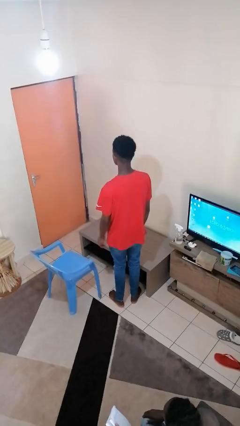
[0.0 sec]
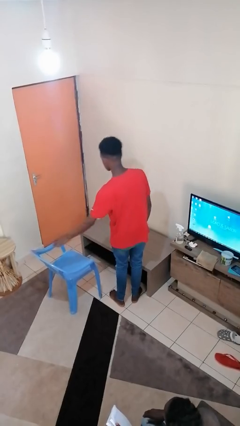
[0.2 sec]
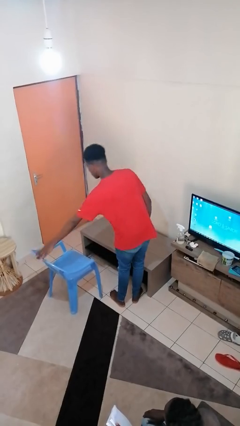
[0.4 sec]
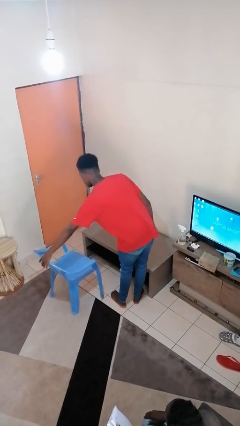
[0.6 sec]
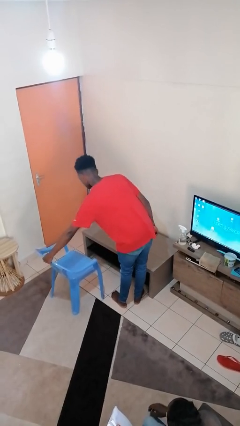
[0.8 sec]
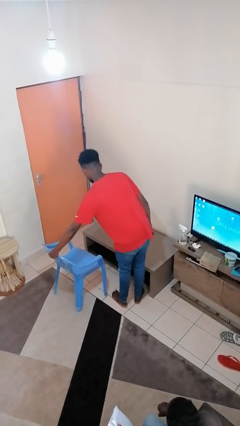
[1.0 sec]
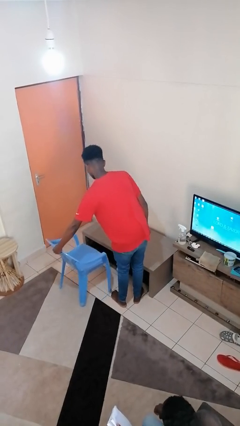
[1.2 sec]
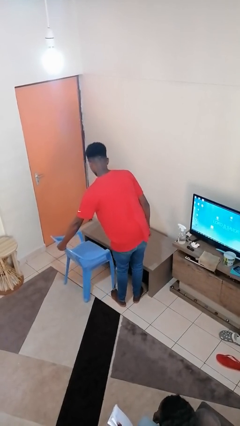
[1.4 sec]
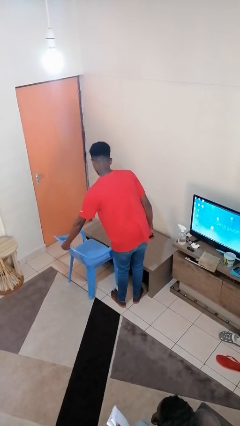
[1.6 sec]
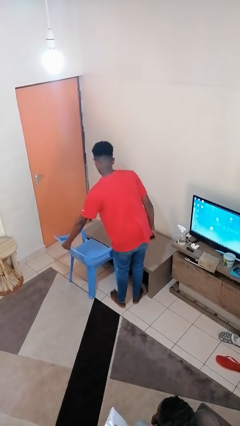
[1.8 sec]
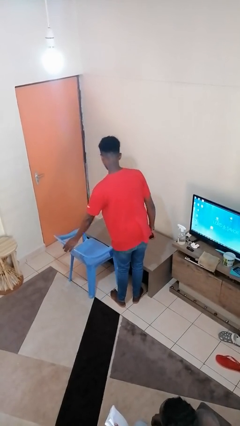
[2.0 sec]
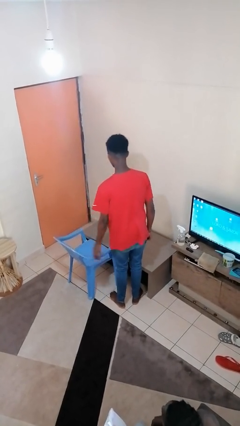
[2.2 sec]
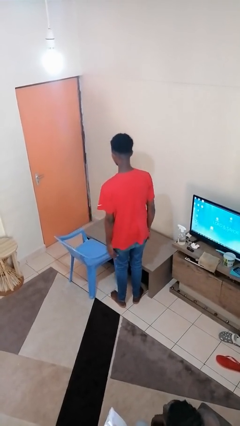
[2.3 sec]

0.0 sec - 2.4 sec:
person pushes in chair

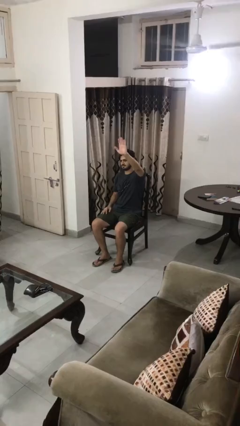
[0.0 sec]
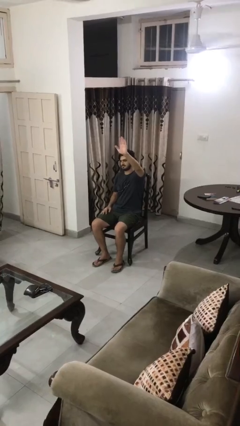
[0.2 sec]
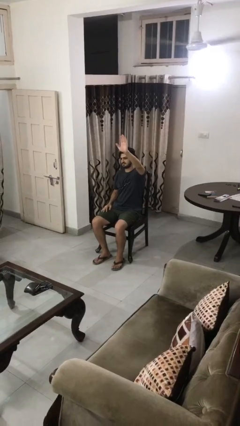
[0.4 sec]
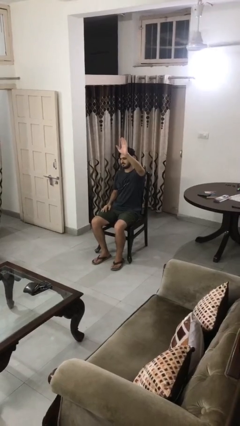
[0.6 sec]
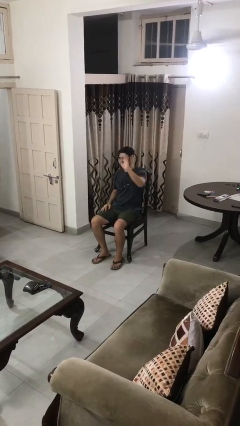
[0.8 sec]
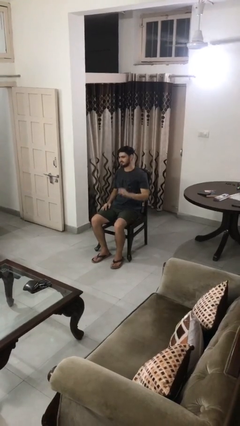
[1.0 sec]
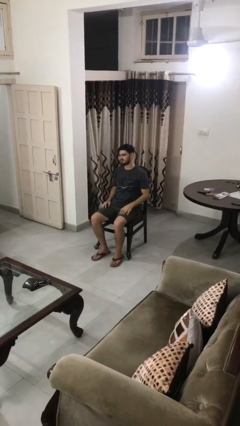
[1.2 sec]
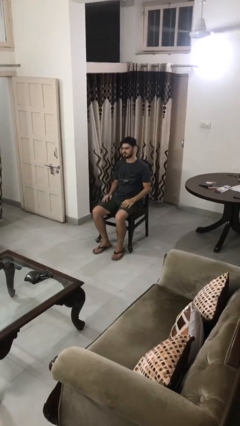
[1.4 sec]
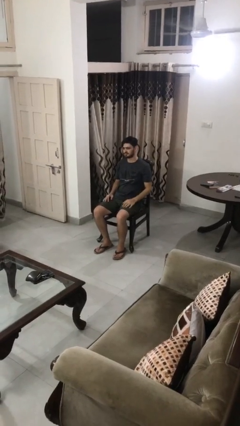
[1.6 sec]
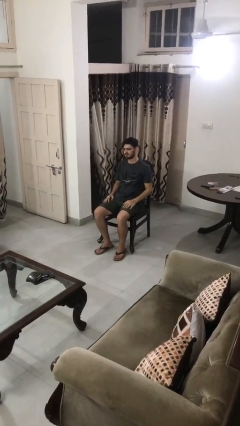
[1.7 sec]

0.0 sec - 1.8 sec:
person gestures lower hand

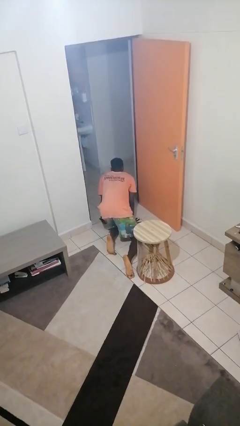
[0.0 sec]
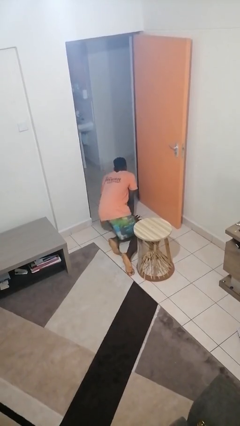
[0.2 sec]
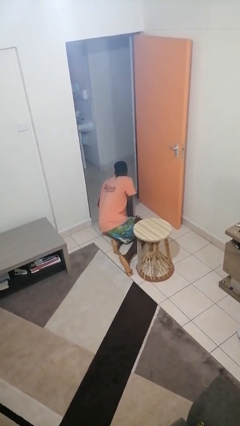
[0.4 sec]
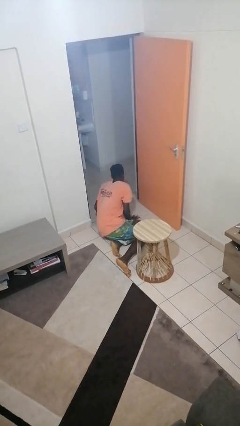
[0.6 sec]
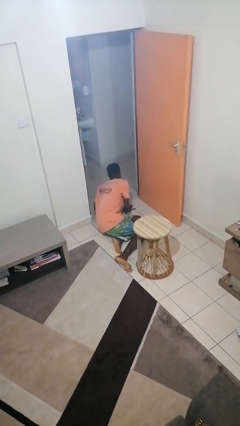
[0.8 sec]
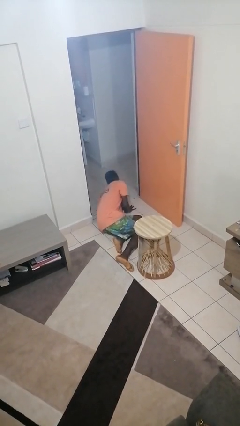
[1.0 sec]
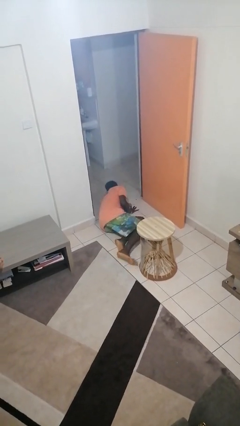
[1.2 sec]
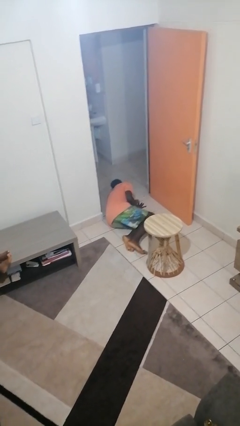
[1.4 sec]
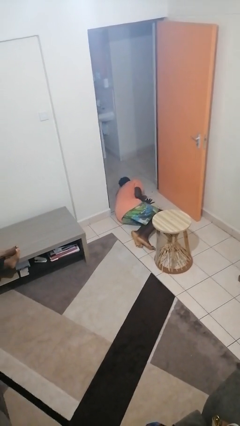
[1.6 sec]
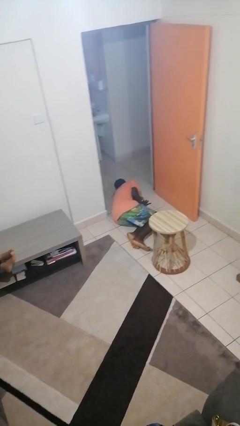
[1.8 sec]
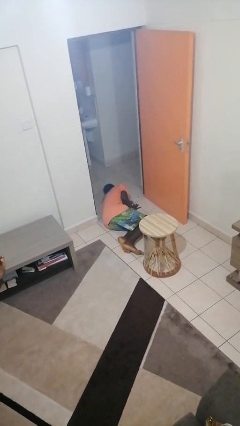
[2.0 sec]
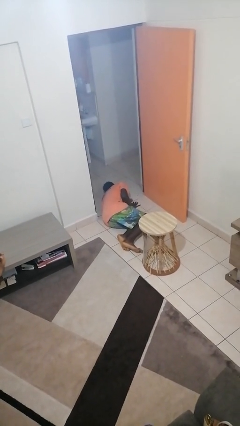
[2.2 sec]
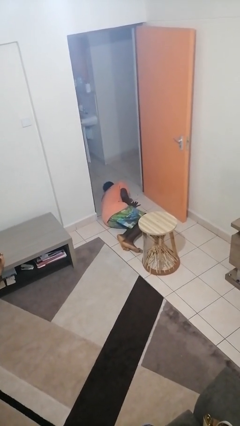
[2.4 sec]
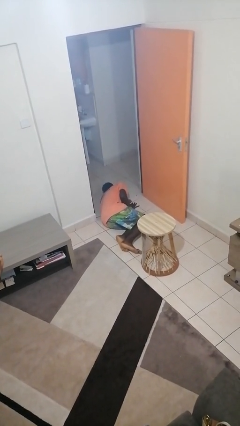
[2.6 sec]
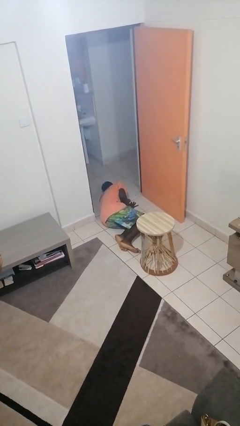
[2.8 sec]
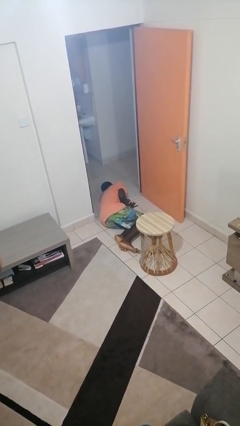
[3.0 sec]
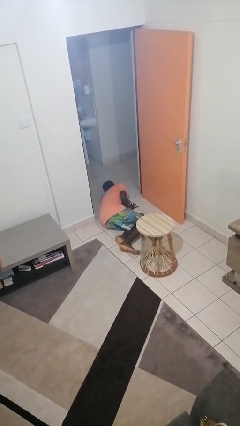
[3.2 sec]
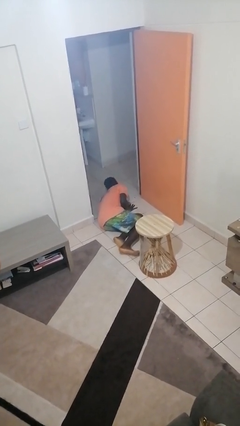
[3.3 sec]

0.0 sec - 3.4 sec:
person lies down on floor

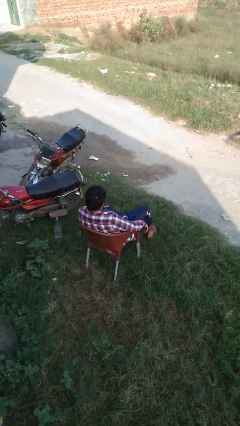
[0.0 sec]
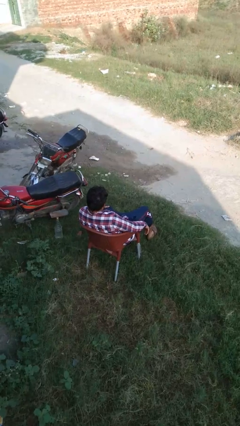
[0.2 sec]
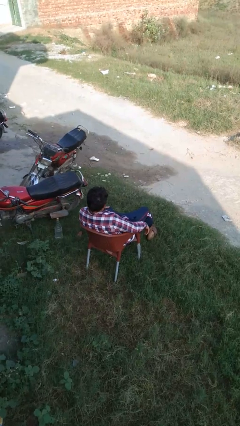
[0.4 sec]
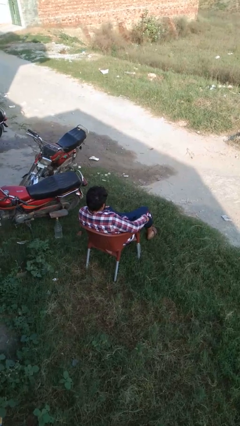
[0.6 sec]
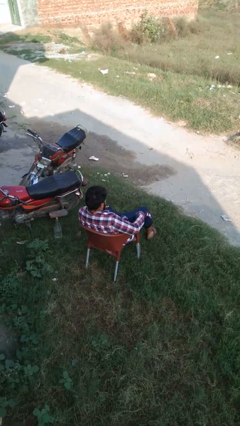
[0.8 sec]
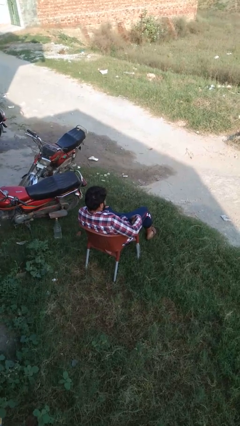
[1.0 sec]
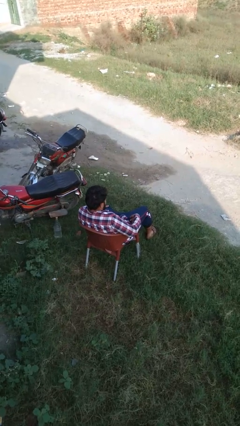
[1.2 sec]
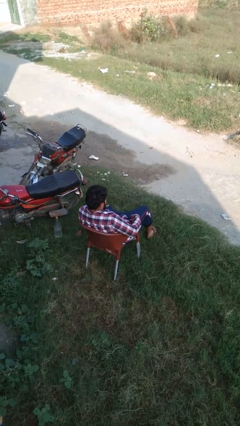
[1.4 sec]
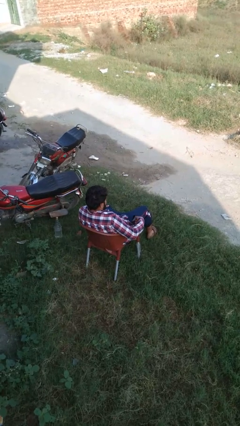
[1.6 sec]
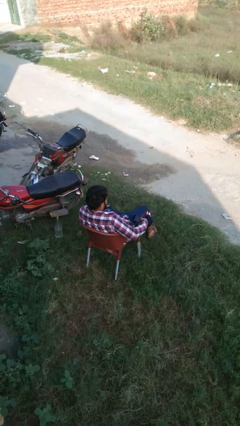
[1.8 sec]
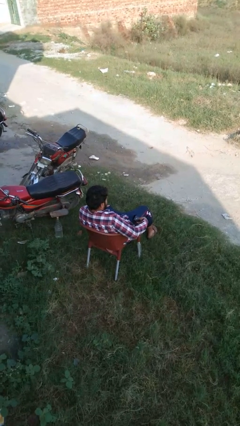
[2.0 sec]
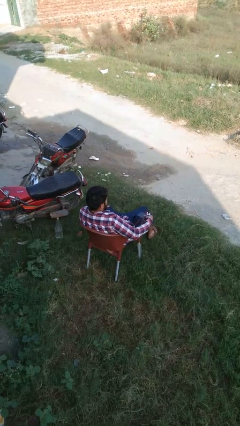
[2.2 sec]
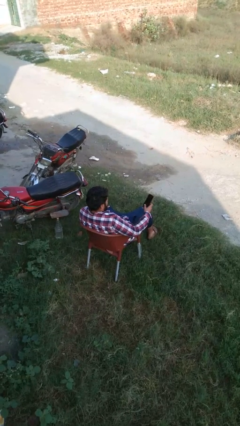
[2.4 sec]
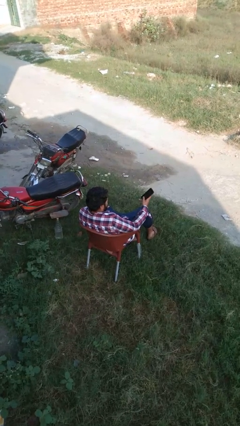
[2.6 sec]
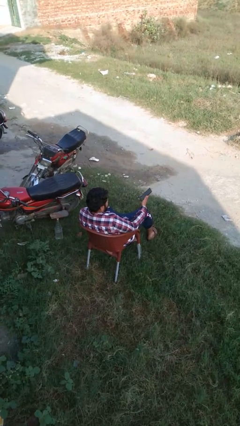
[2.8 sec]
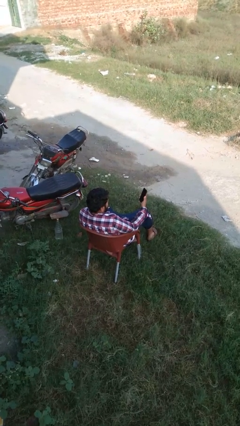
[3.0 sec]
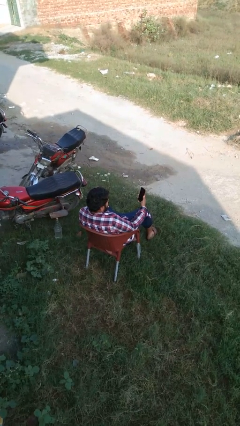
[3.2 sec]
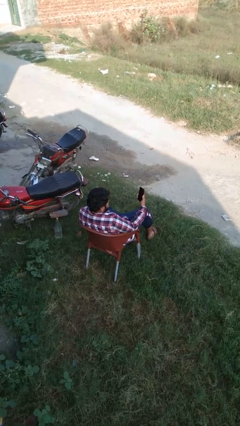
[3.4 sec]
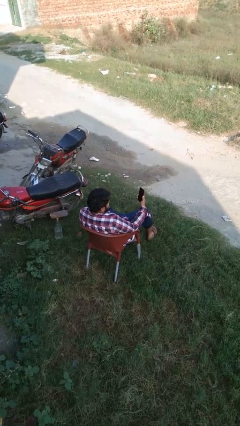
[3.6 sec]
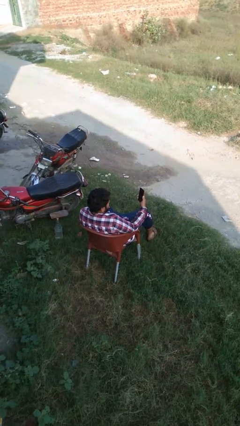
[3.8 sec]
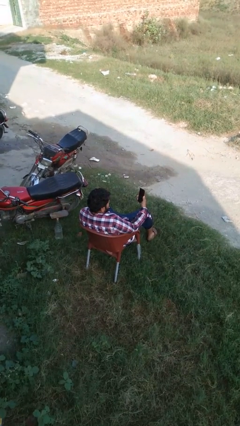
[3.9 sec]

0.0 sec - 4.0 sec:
person takes phone from pocket

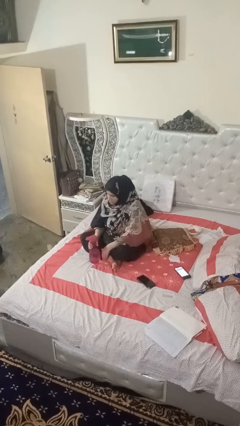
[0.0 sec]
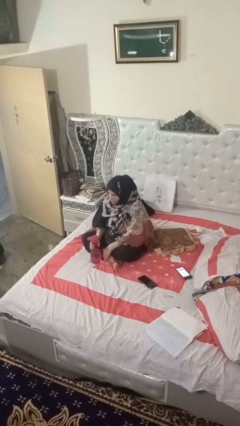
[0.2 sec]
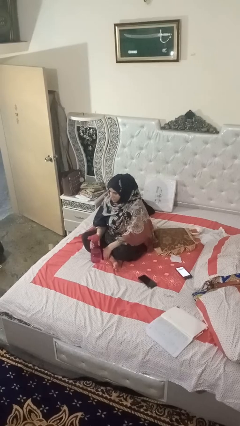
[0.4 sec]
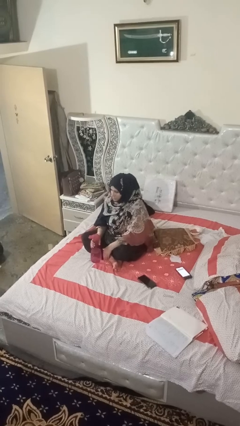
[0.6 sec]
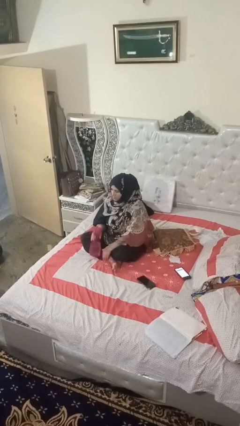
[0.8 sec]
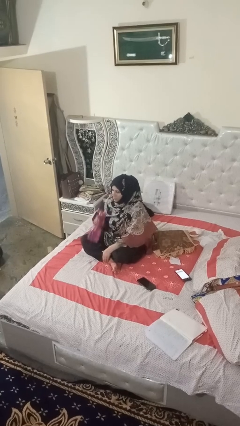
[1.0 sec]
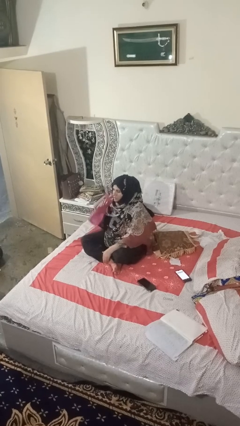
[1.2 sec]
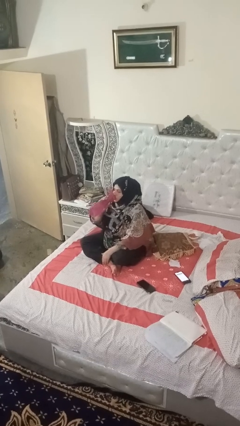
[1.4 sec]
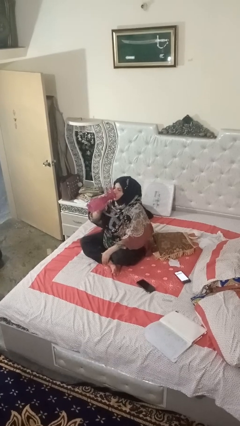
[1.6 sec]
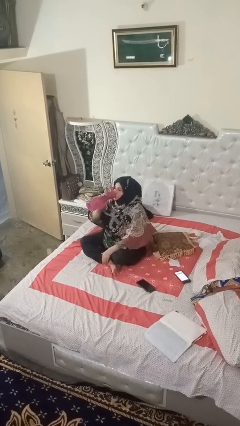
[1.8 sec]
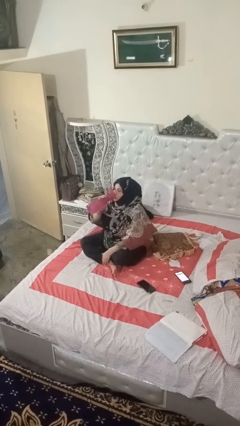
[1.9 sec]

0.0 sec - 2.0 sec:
person drinks from bottle

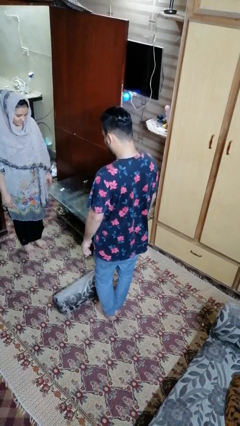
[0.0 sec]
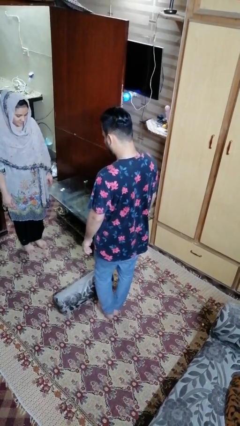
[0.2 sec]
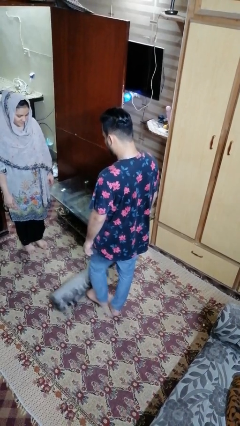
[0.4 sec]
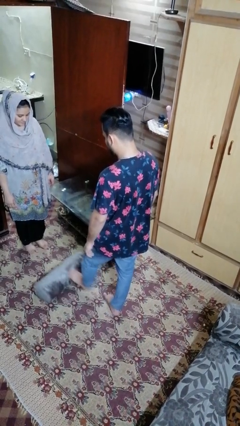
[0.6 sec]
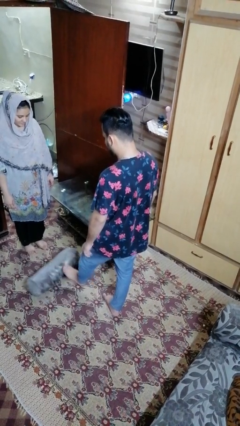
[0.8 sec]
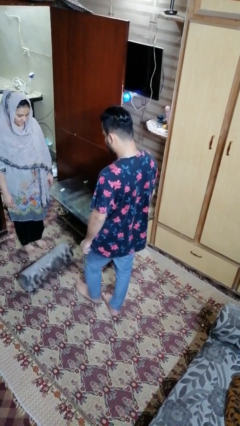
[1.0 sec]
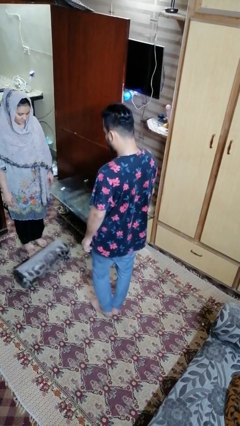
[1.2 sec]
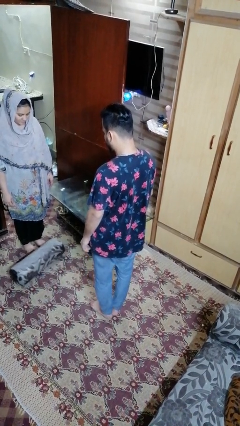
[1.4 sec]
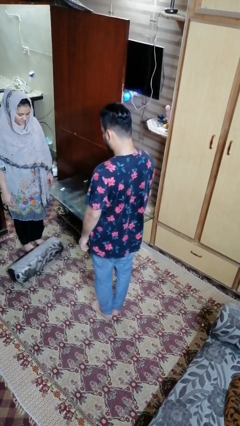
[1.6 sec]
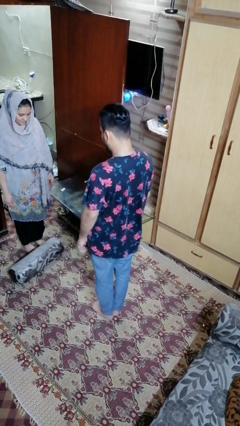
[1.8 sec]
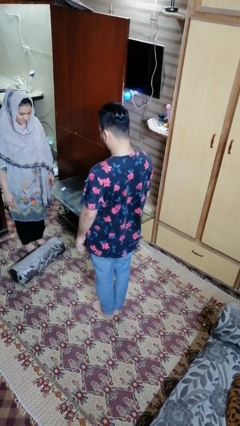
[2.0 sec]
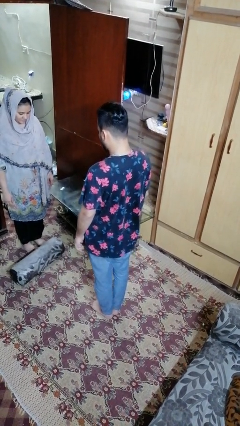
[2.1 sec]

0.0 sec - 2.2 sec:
person kicks object to person

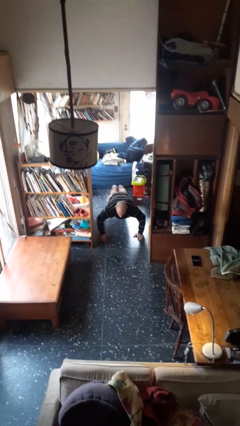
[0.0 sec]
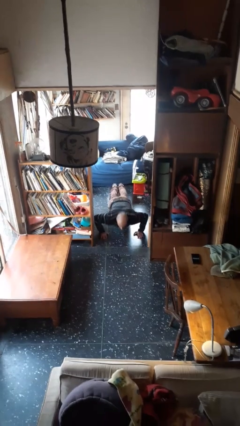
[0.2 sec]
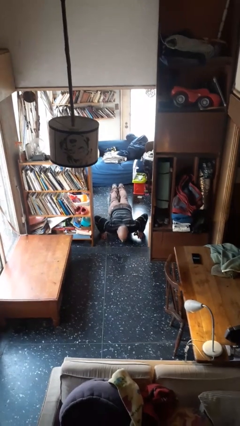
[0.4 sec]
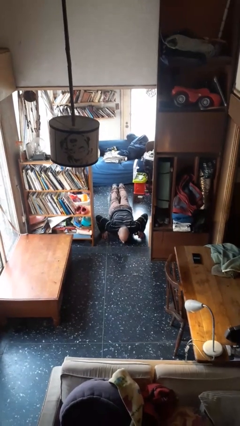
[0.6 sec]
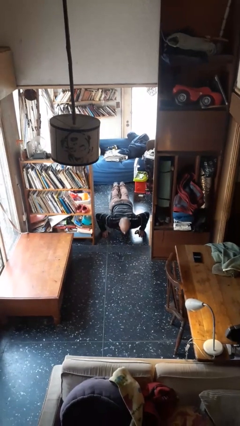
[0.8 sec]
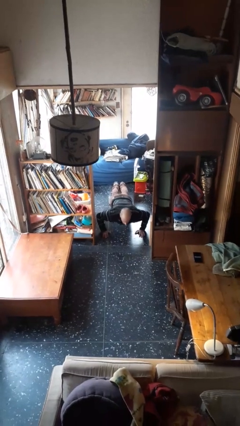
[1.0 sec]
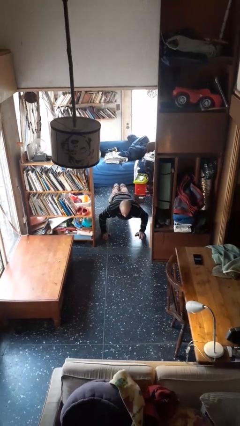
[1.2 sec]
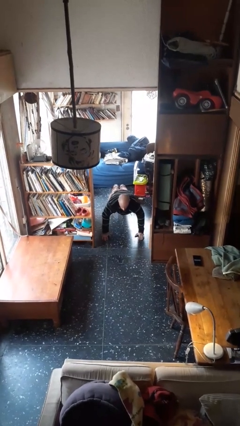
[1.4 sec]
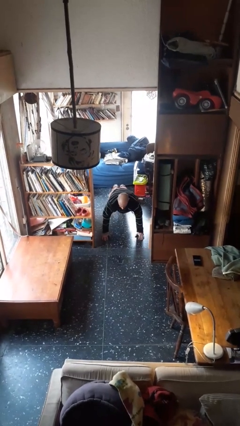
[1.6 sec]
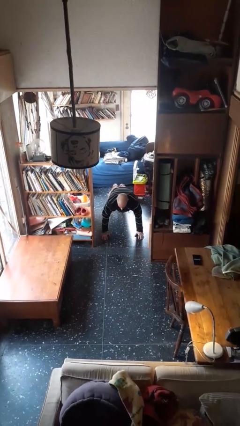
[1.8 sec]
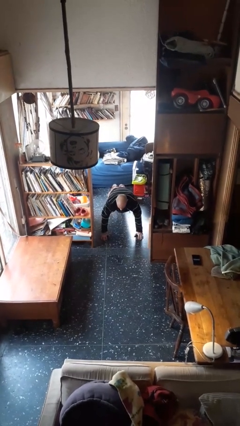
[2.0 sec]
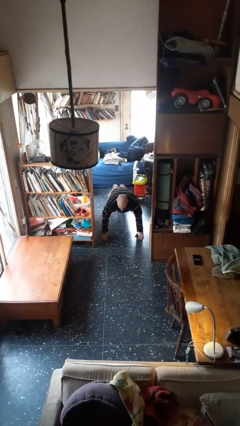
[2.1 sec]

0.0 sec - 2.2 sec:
person exercises with pushup
